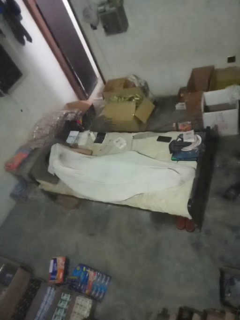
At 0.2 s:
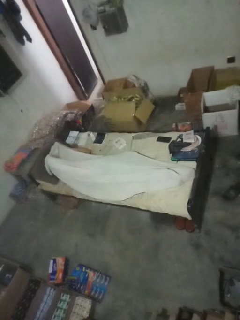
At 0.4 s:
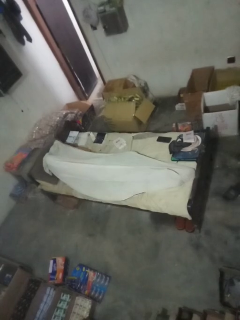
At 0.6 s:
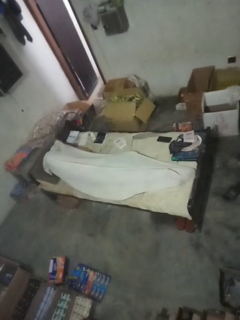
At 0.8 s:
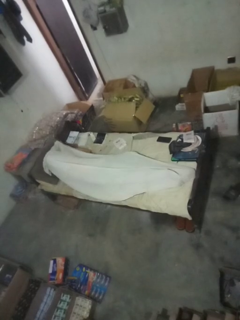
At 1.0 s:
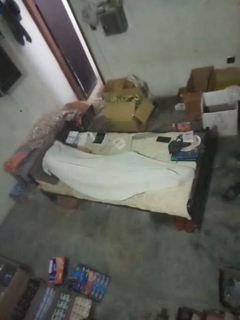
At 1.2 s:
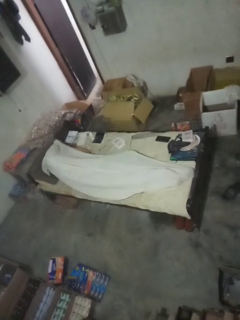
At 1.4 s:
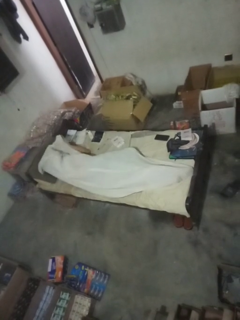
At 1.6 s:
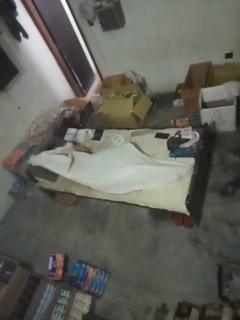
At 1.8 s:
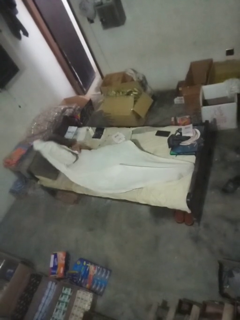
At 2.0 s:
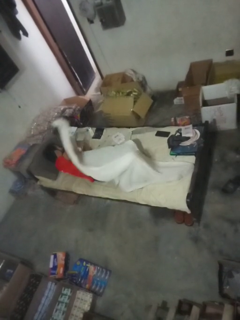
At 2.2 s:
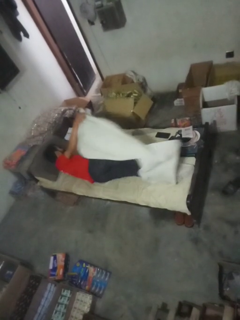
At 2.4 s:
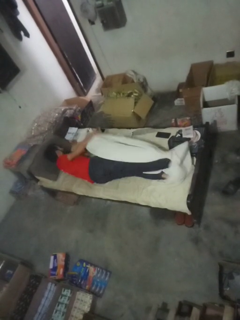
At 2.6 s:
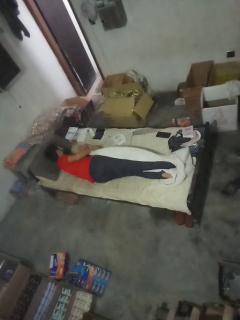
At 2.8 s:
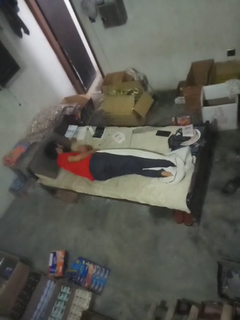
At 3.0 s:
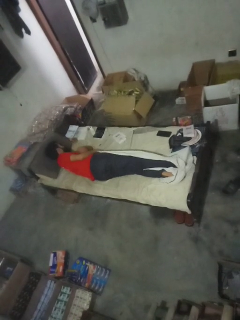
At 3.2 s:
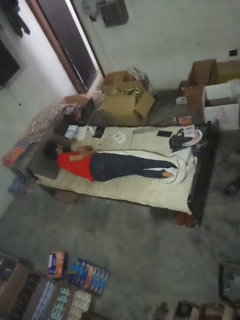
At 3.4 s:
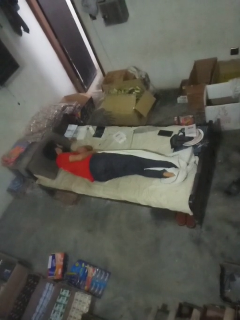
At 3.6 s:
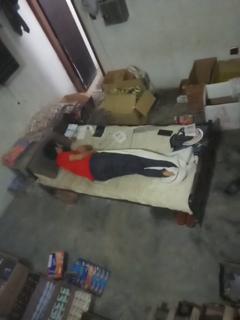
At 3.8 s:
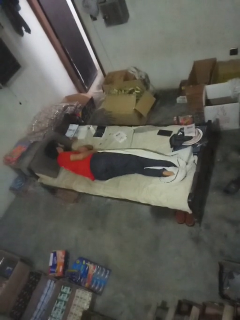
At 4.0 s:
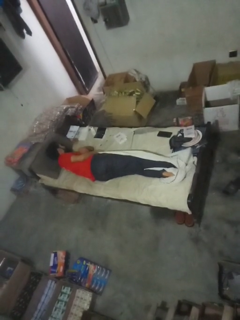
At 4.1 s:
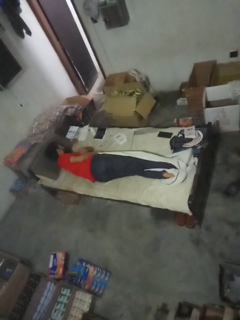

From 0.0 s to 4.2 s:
person uncovers with bedsheets

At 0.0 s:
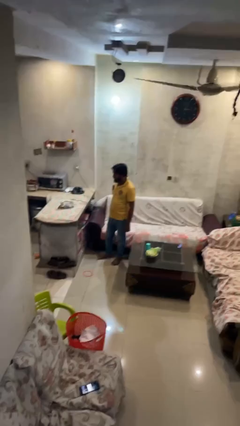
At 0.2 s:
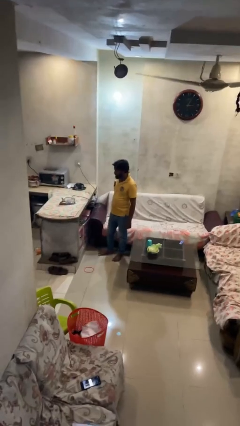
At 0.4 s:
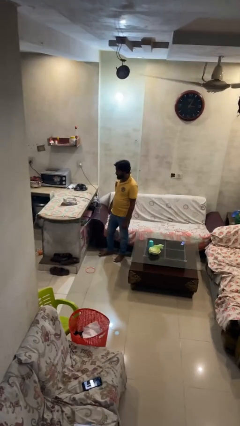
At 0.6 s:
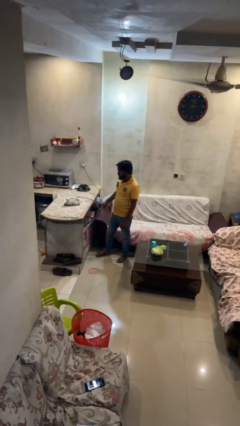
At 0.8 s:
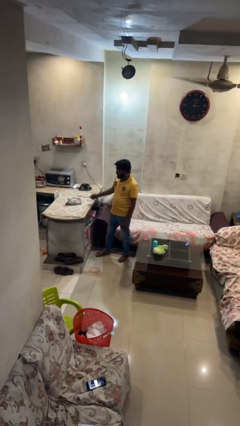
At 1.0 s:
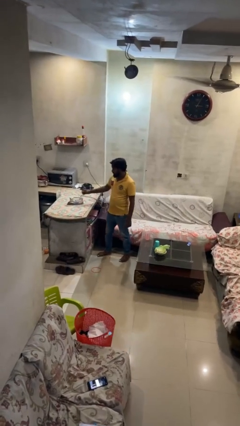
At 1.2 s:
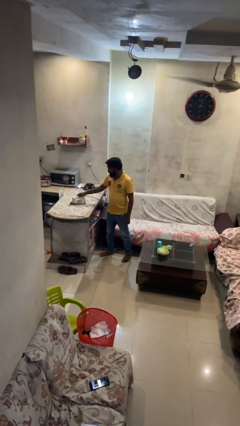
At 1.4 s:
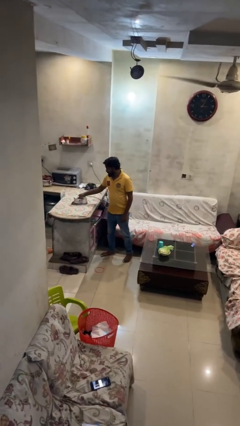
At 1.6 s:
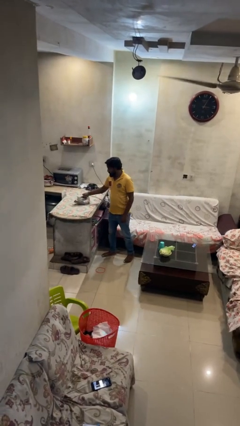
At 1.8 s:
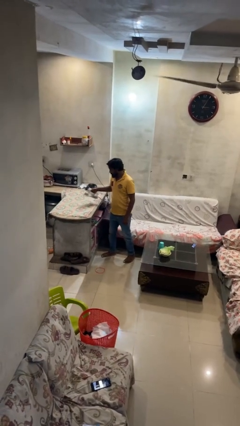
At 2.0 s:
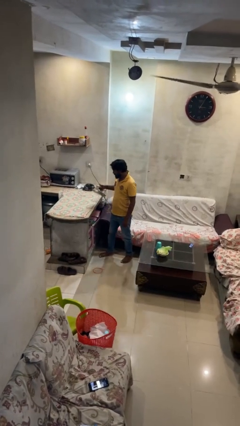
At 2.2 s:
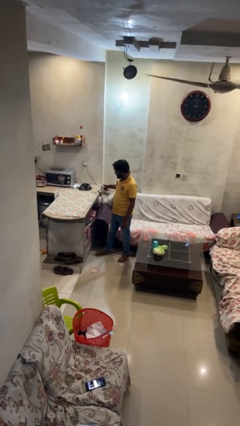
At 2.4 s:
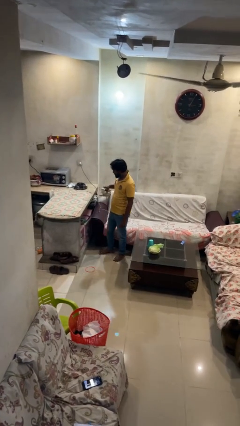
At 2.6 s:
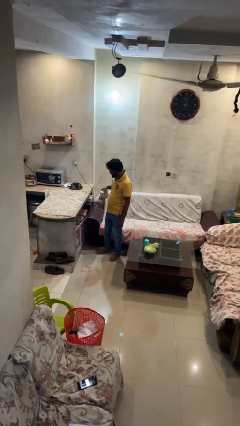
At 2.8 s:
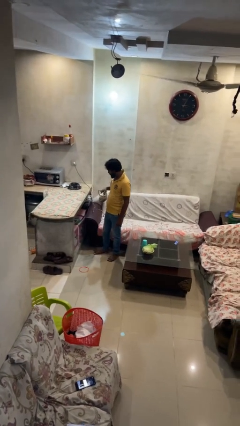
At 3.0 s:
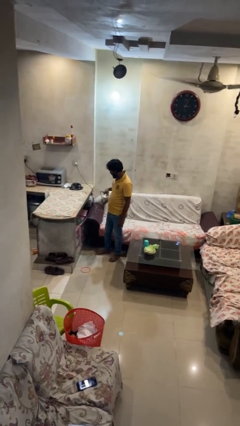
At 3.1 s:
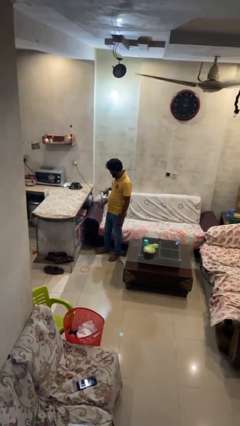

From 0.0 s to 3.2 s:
person picks up object from countertop

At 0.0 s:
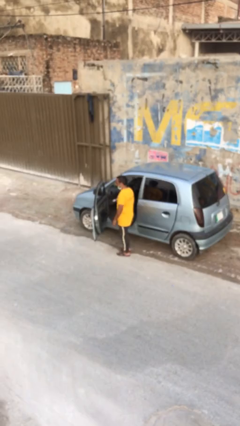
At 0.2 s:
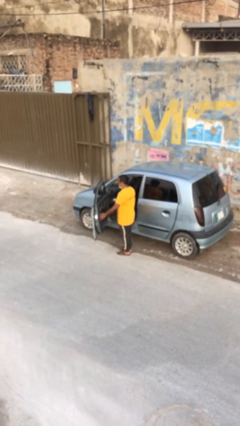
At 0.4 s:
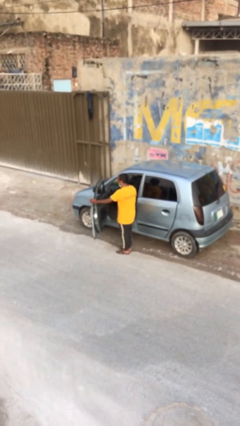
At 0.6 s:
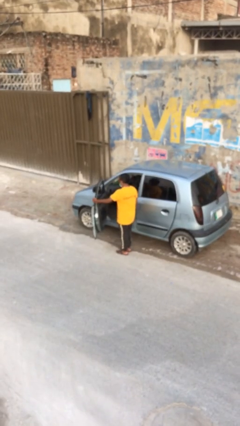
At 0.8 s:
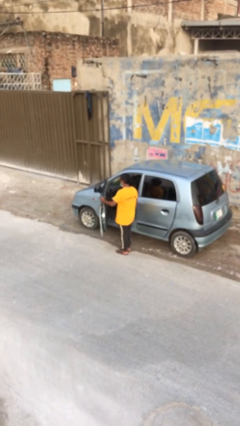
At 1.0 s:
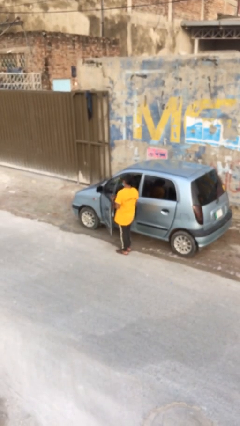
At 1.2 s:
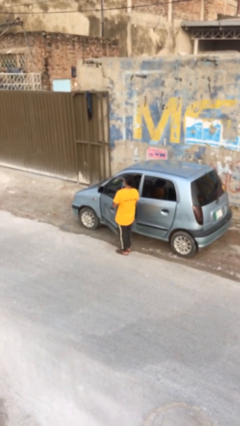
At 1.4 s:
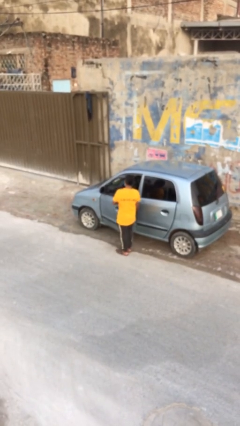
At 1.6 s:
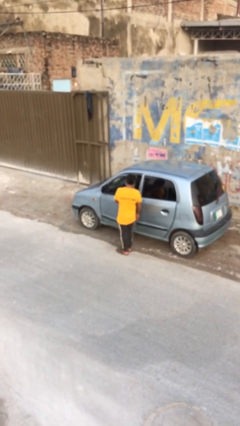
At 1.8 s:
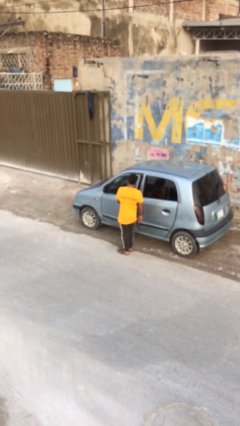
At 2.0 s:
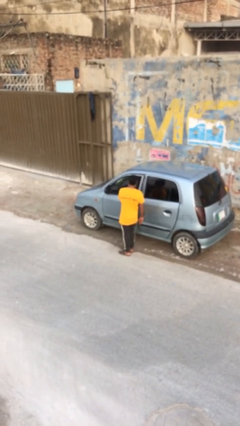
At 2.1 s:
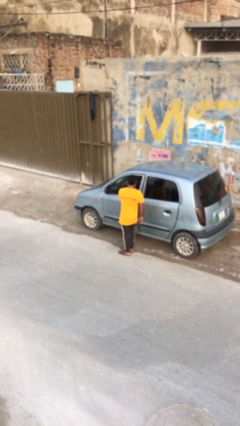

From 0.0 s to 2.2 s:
person closes car door

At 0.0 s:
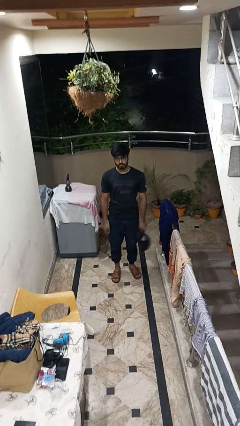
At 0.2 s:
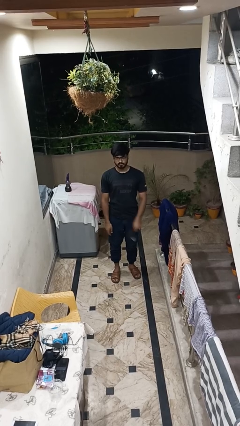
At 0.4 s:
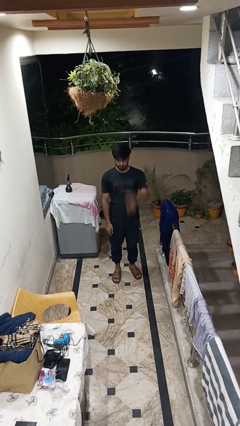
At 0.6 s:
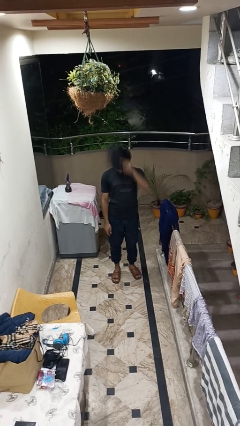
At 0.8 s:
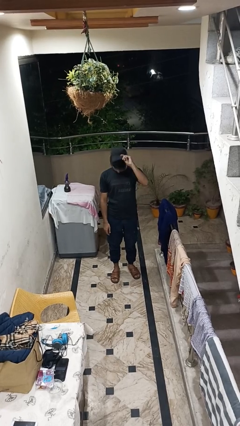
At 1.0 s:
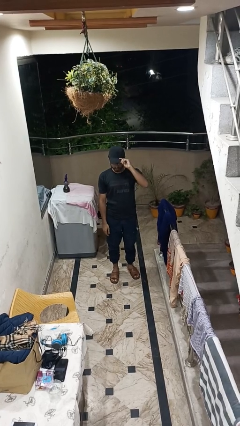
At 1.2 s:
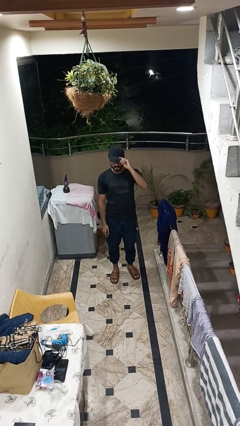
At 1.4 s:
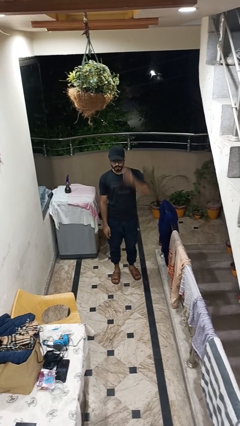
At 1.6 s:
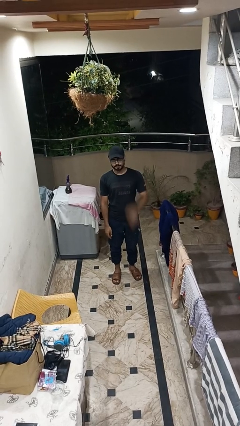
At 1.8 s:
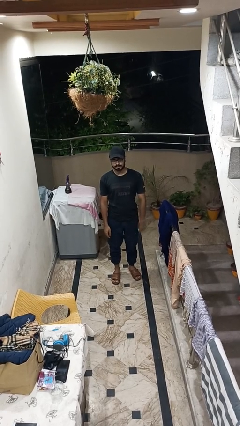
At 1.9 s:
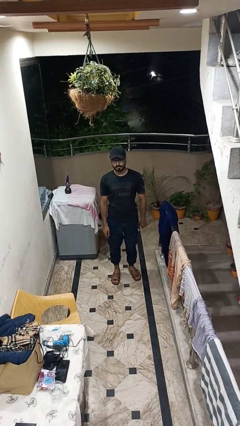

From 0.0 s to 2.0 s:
person puts on hat

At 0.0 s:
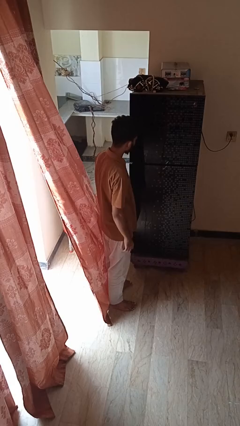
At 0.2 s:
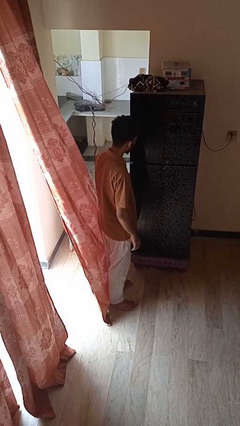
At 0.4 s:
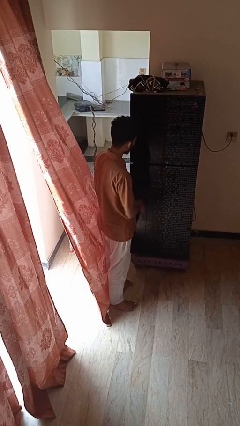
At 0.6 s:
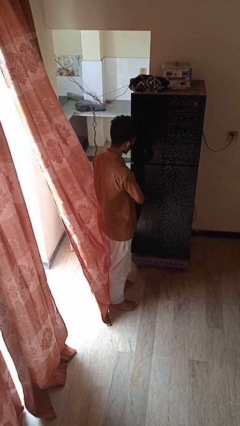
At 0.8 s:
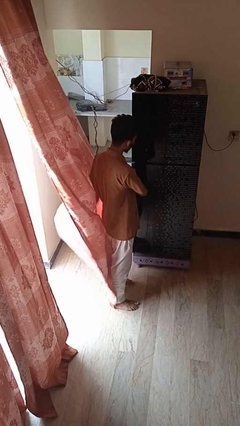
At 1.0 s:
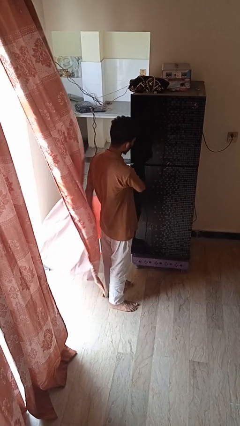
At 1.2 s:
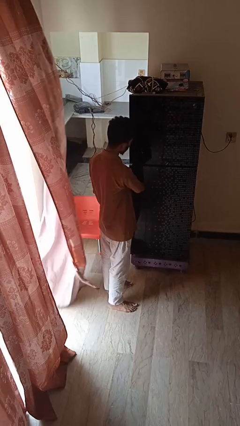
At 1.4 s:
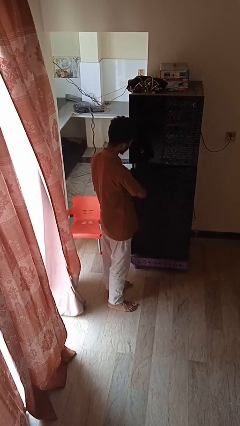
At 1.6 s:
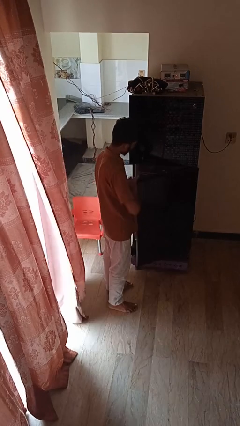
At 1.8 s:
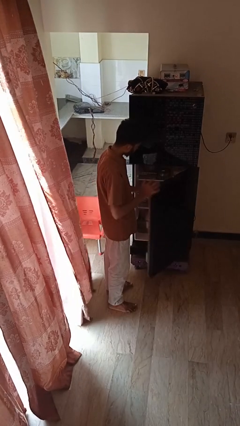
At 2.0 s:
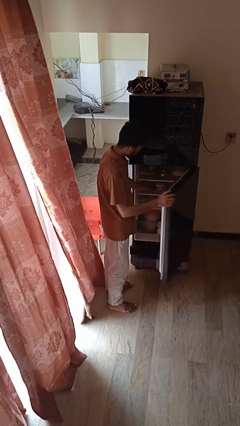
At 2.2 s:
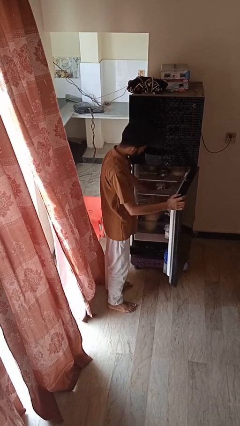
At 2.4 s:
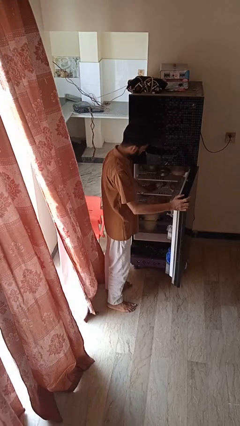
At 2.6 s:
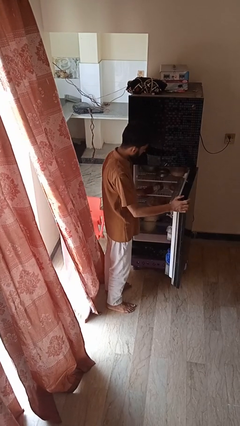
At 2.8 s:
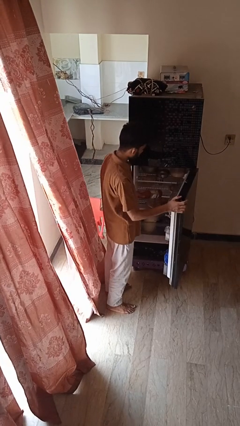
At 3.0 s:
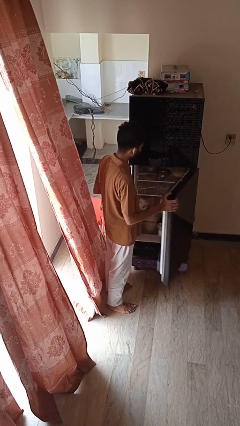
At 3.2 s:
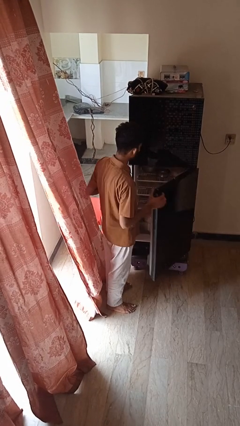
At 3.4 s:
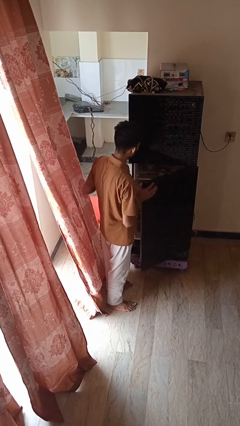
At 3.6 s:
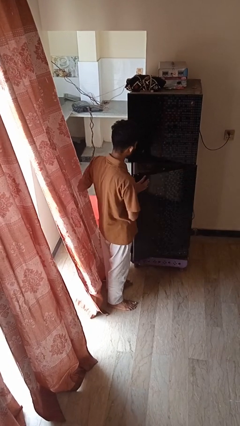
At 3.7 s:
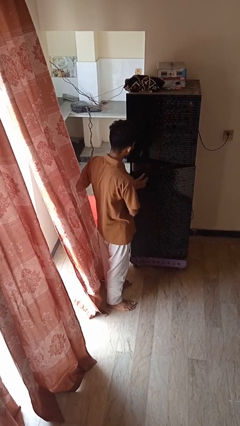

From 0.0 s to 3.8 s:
person takes object from refrigerator

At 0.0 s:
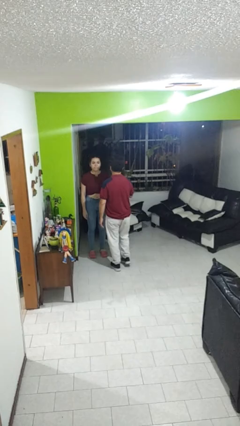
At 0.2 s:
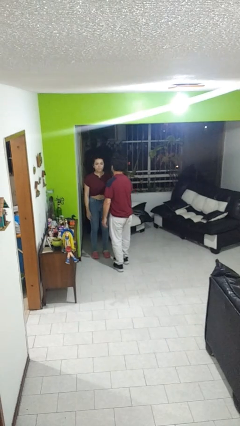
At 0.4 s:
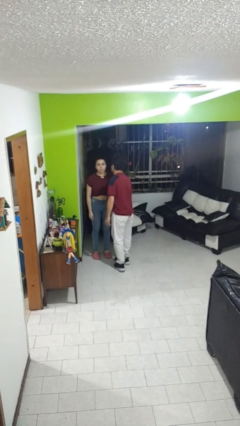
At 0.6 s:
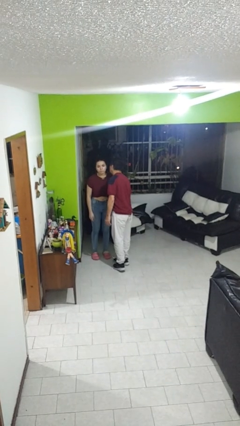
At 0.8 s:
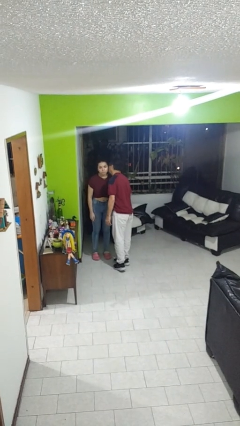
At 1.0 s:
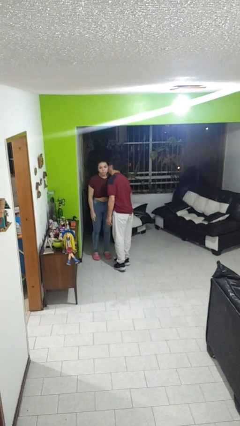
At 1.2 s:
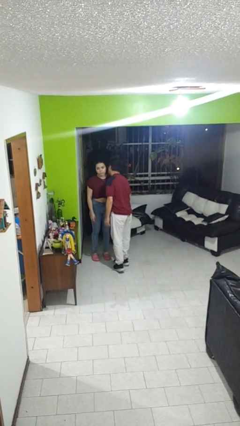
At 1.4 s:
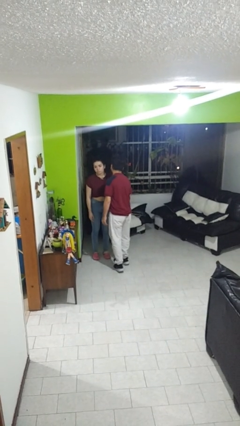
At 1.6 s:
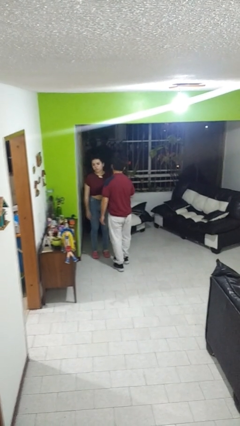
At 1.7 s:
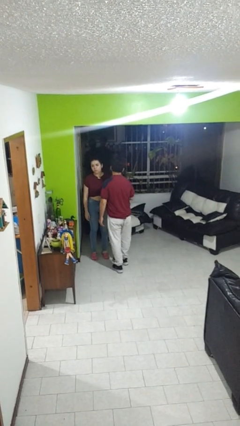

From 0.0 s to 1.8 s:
person kisses cheek of person

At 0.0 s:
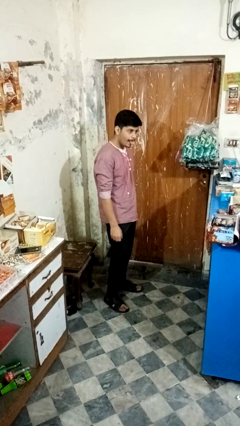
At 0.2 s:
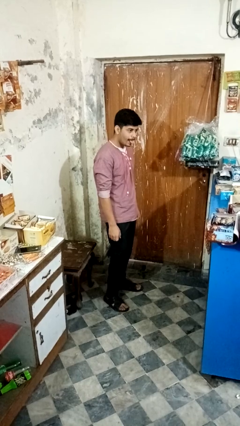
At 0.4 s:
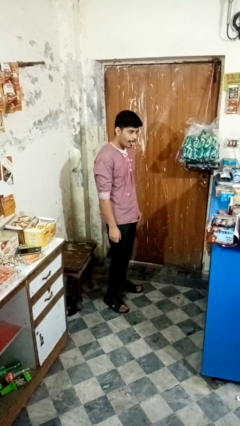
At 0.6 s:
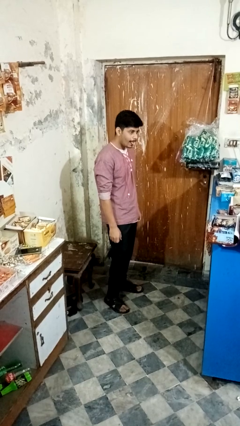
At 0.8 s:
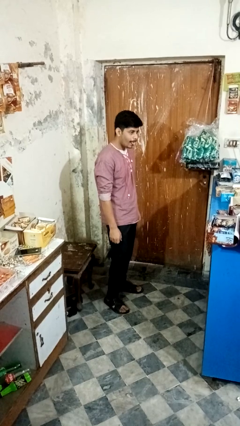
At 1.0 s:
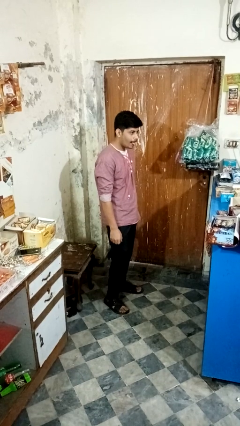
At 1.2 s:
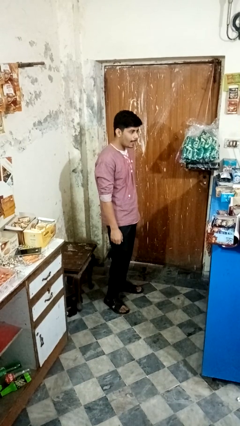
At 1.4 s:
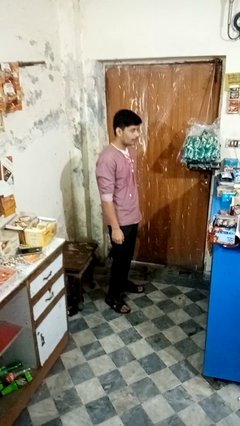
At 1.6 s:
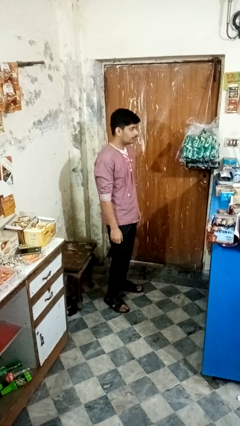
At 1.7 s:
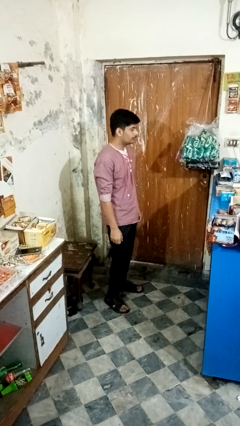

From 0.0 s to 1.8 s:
person sticks out tongue
